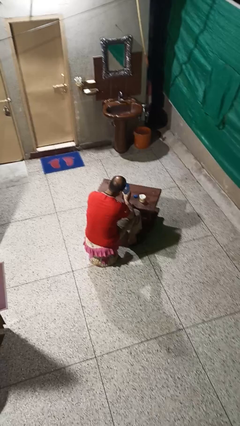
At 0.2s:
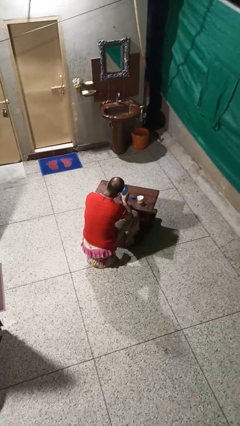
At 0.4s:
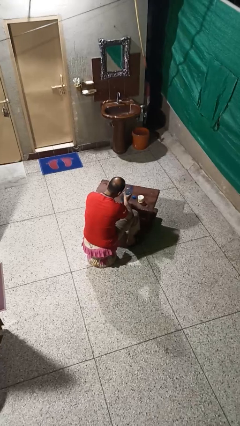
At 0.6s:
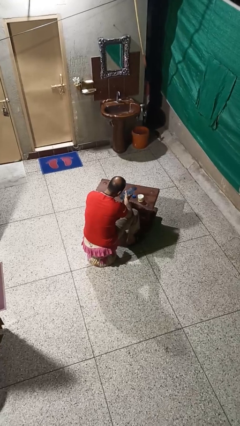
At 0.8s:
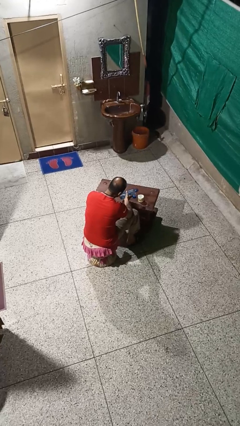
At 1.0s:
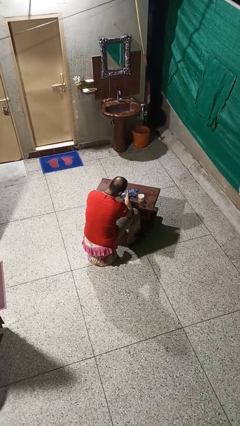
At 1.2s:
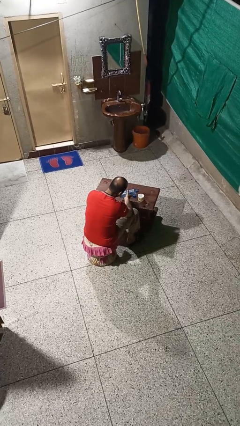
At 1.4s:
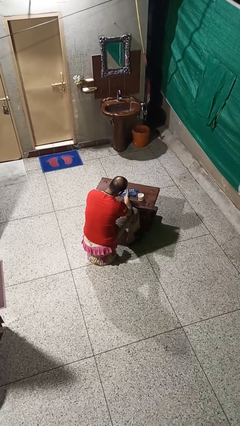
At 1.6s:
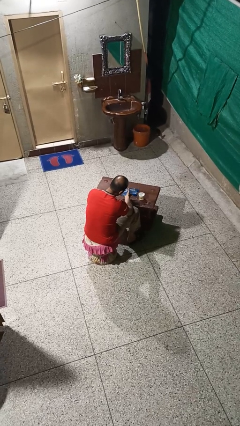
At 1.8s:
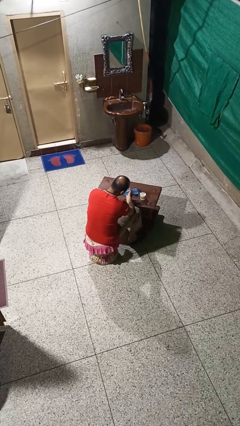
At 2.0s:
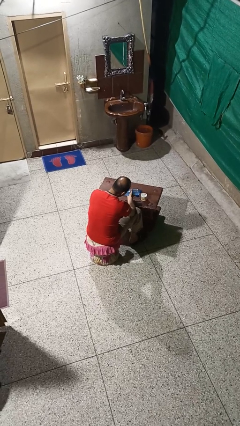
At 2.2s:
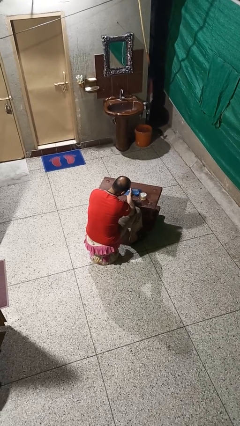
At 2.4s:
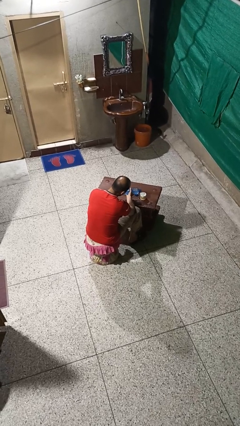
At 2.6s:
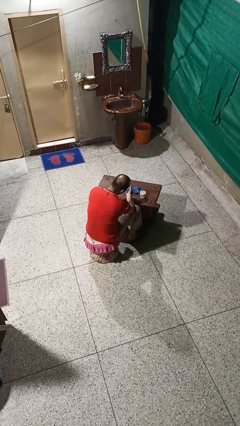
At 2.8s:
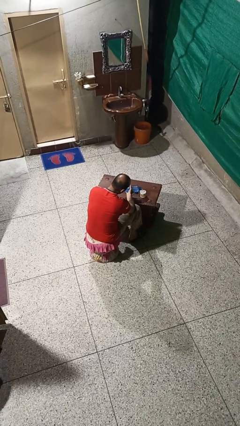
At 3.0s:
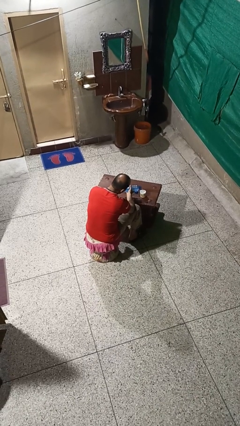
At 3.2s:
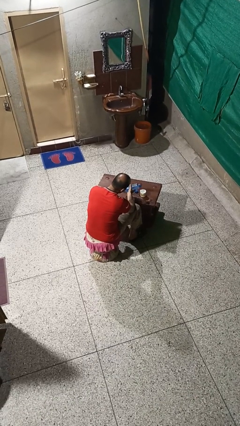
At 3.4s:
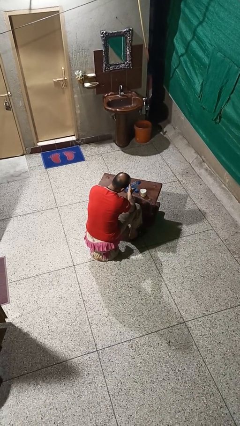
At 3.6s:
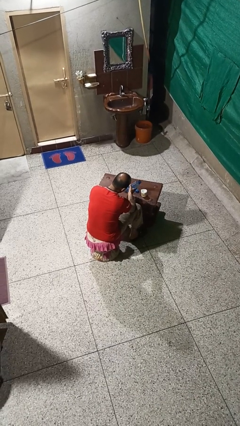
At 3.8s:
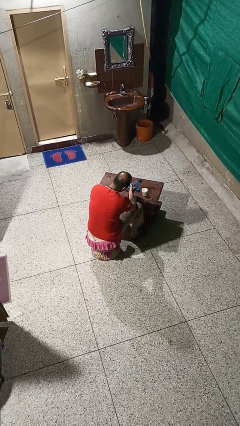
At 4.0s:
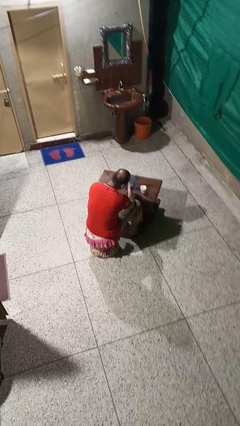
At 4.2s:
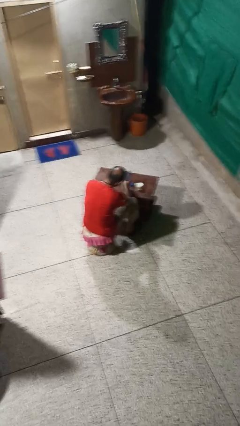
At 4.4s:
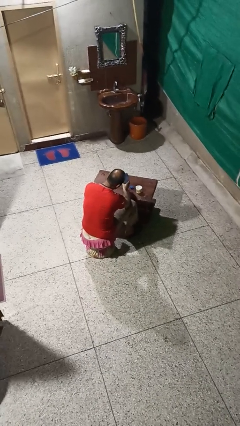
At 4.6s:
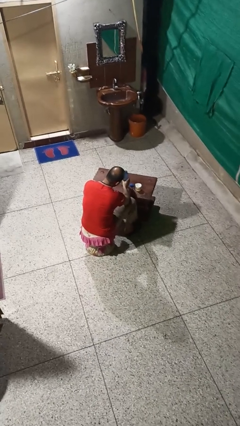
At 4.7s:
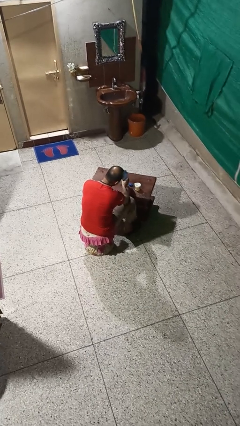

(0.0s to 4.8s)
person pours liquid into cup

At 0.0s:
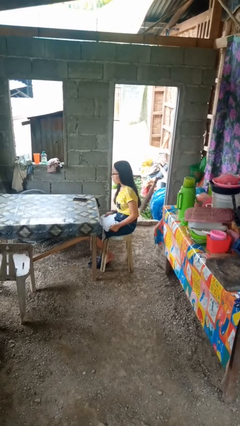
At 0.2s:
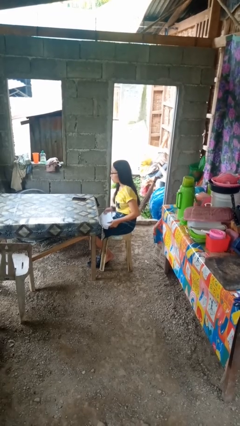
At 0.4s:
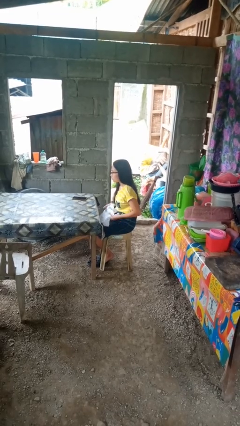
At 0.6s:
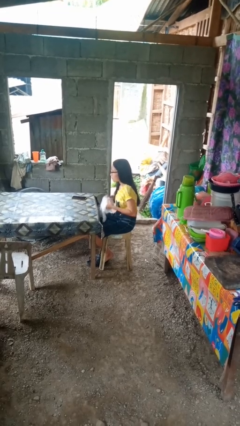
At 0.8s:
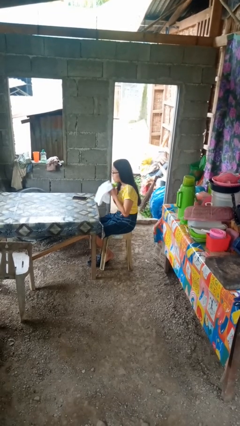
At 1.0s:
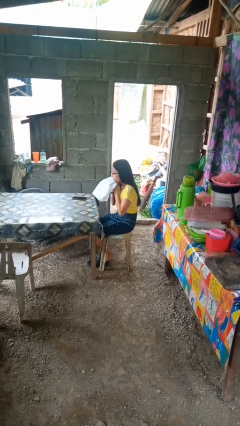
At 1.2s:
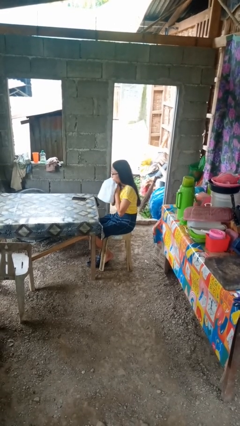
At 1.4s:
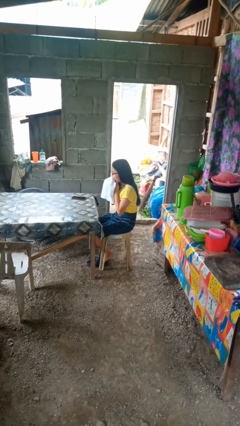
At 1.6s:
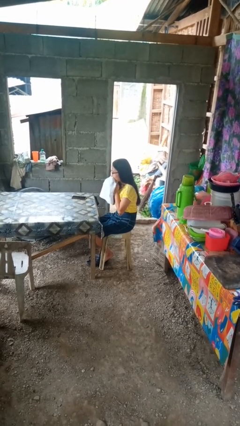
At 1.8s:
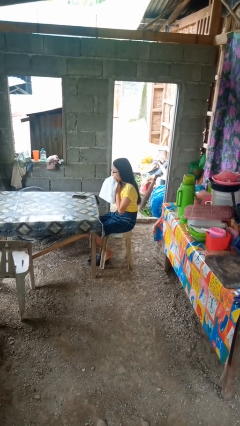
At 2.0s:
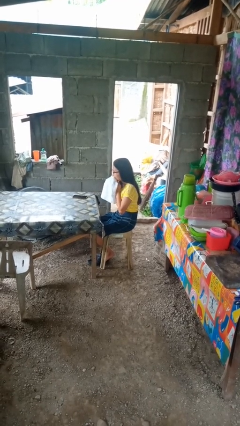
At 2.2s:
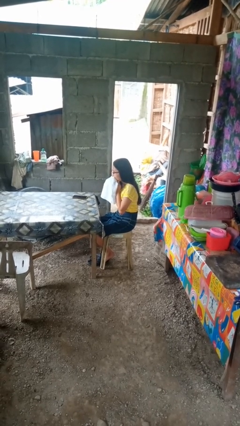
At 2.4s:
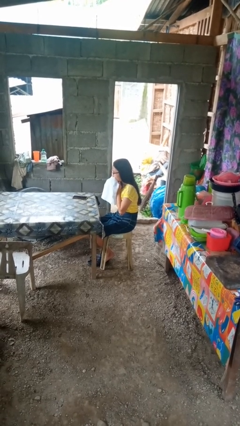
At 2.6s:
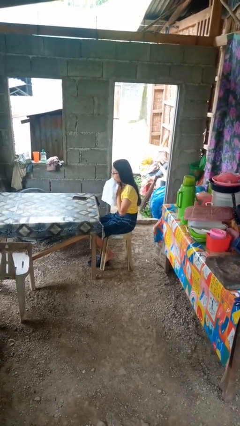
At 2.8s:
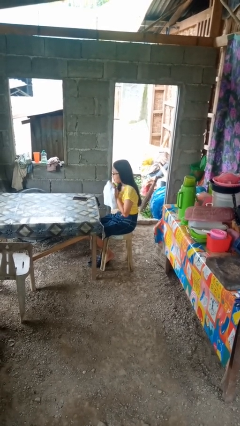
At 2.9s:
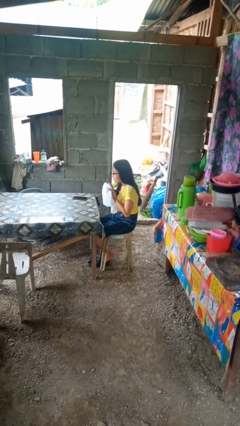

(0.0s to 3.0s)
person wipes mouth with napkin

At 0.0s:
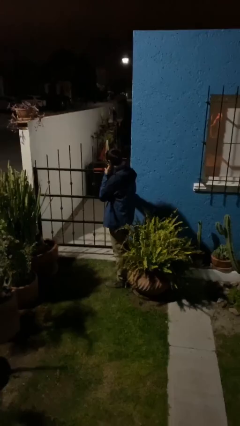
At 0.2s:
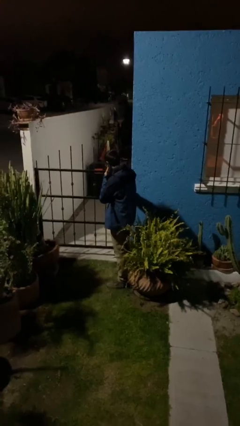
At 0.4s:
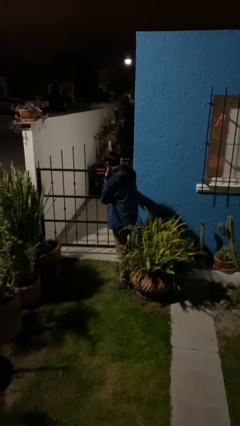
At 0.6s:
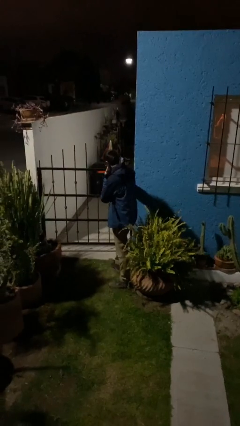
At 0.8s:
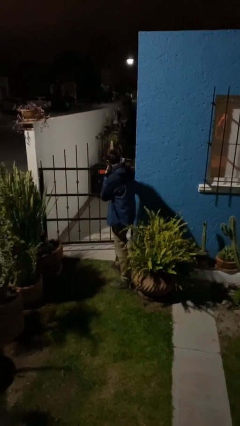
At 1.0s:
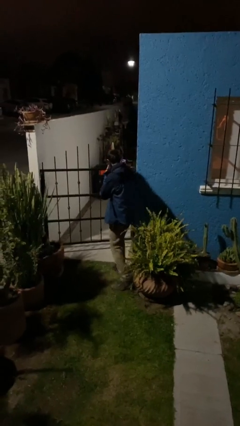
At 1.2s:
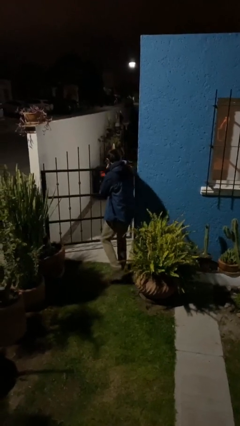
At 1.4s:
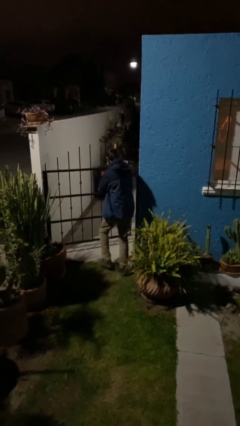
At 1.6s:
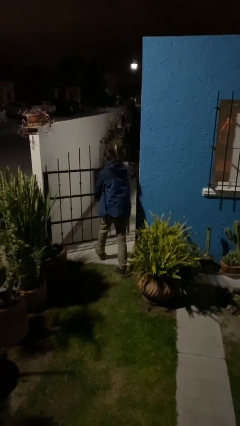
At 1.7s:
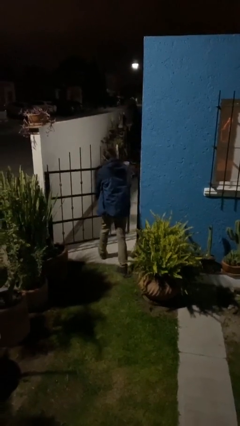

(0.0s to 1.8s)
person opens facility door

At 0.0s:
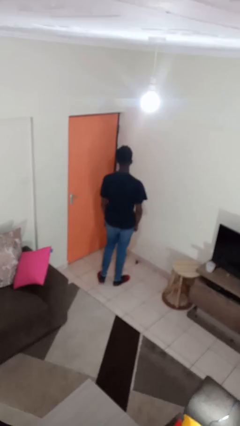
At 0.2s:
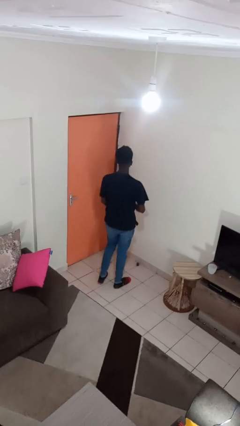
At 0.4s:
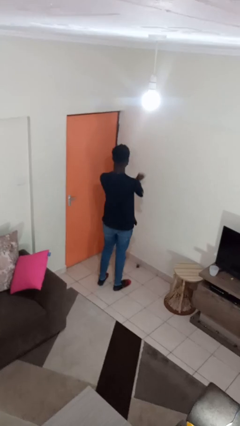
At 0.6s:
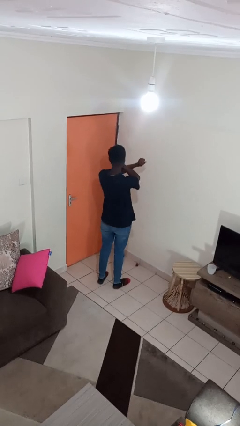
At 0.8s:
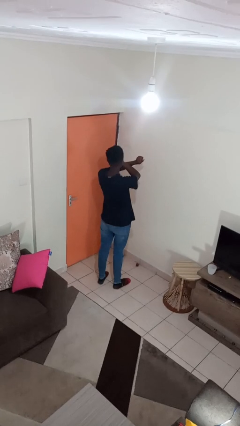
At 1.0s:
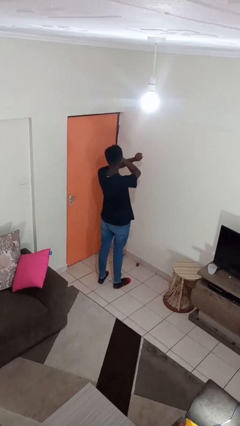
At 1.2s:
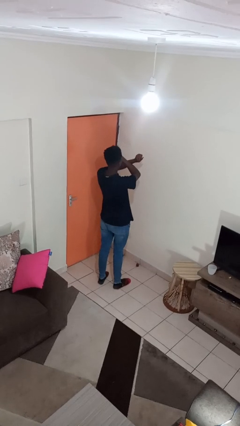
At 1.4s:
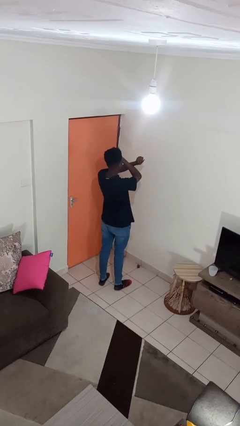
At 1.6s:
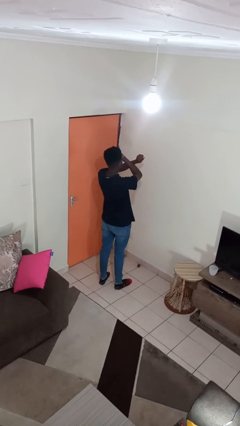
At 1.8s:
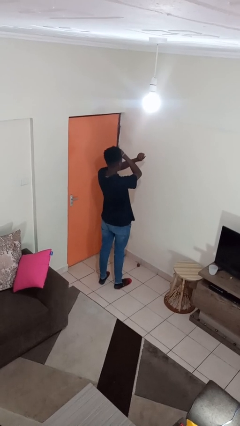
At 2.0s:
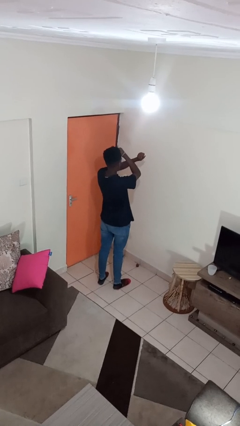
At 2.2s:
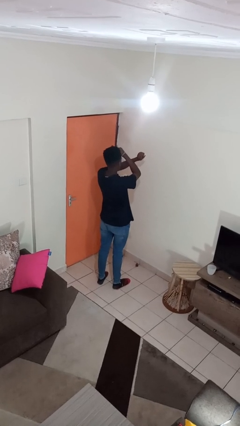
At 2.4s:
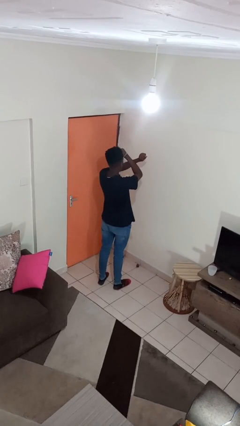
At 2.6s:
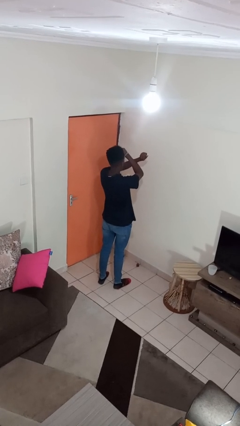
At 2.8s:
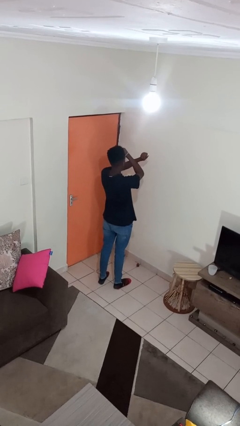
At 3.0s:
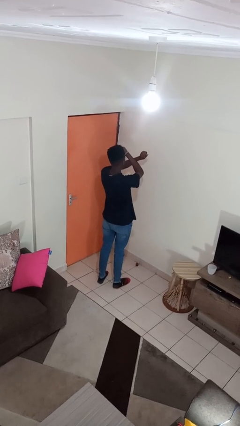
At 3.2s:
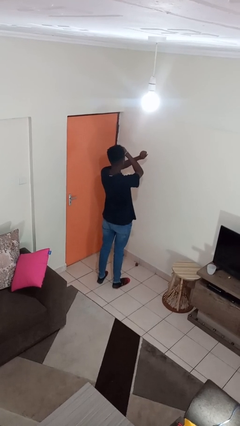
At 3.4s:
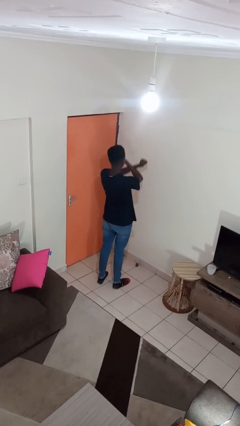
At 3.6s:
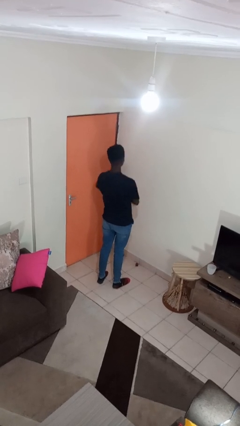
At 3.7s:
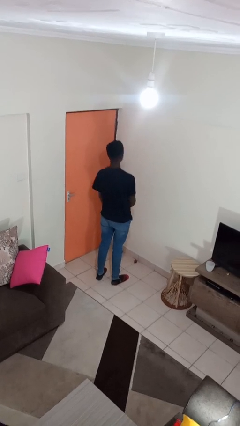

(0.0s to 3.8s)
person gestures arms x

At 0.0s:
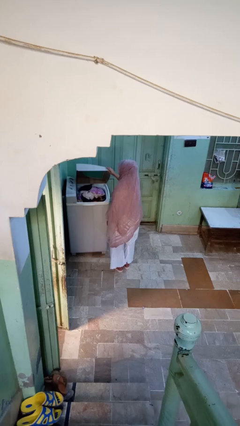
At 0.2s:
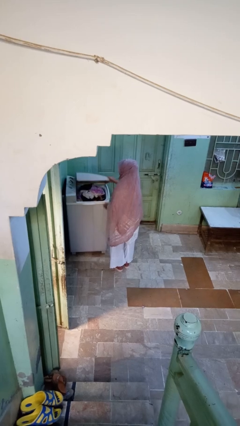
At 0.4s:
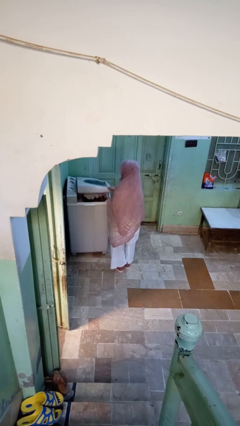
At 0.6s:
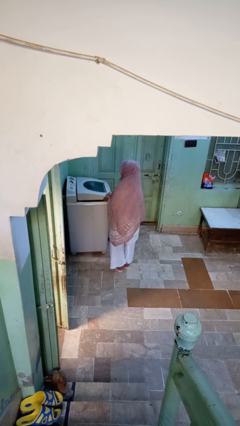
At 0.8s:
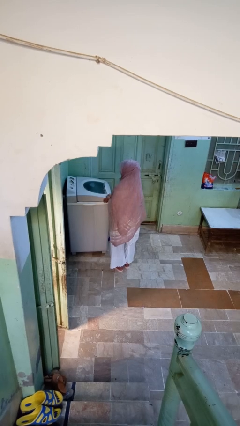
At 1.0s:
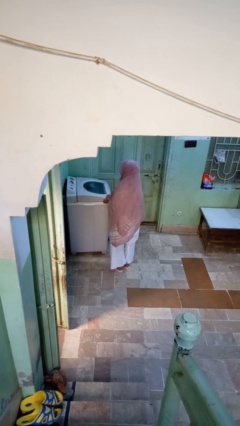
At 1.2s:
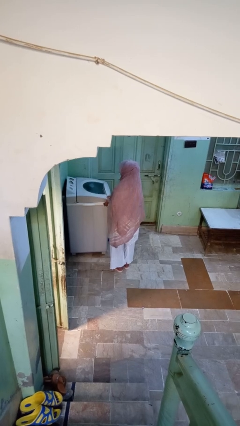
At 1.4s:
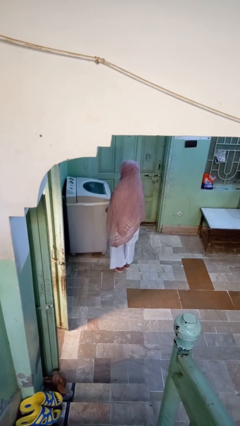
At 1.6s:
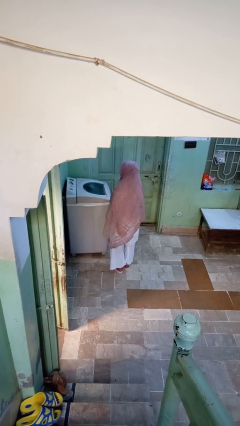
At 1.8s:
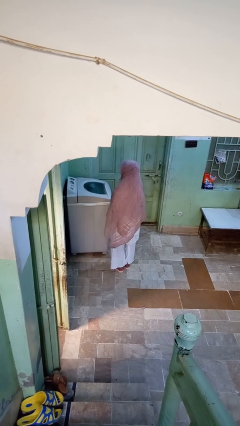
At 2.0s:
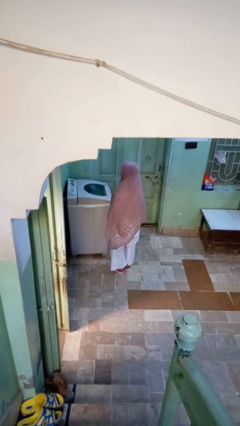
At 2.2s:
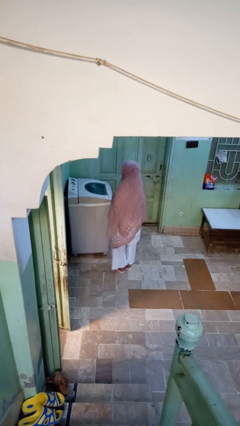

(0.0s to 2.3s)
person closes clothes washer

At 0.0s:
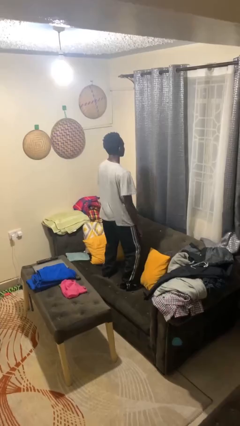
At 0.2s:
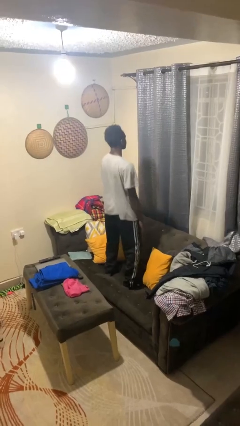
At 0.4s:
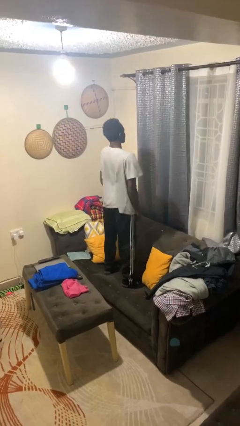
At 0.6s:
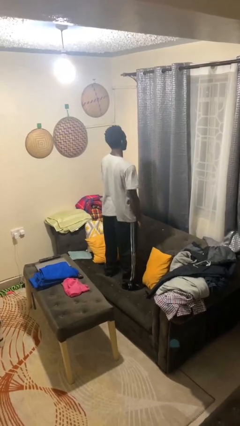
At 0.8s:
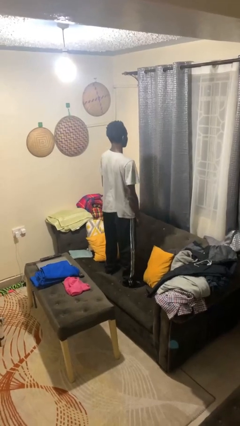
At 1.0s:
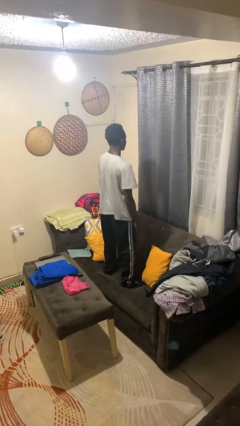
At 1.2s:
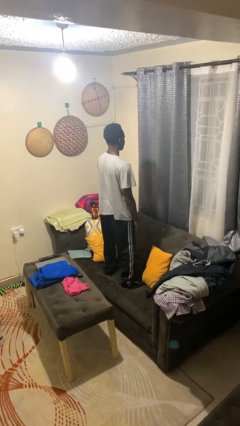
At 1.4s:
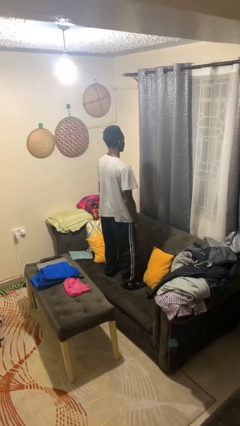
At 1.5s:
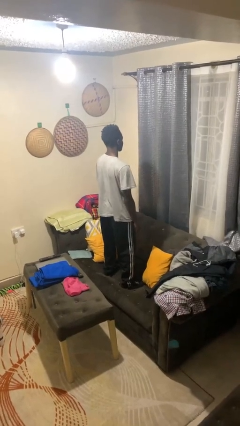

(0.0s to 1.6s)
person jumps on couch

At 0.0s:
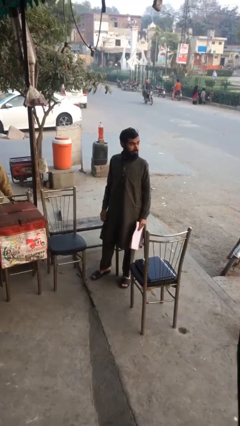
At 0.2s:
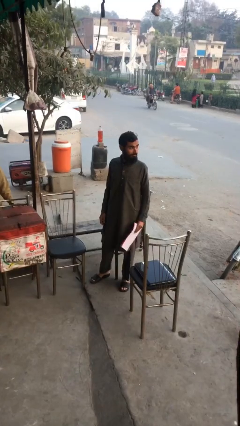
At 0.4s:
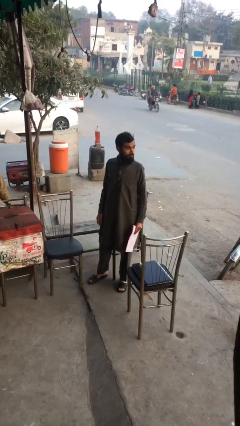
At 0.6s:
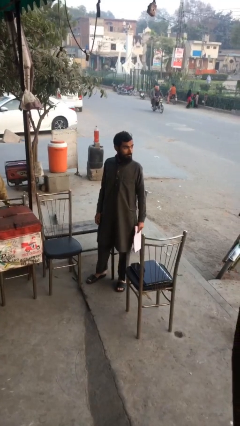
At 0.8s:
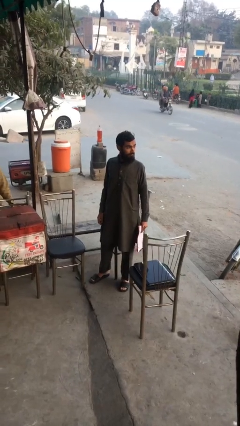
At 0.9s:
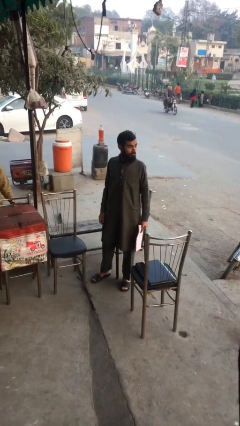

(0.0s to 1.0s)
person reads document
